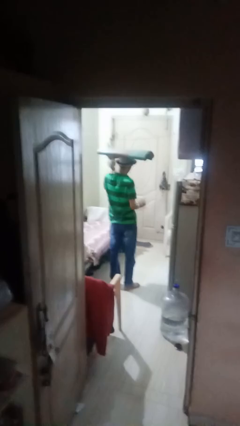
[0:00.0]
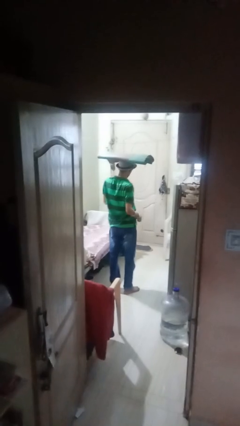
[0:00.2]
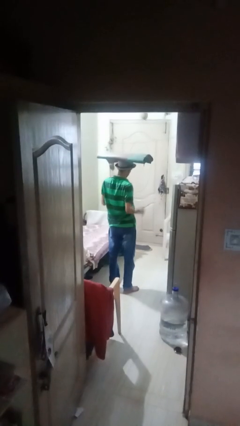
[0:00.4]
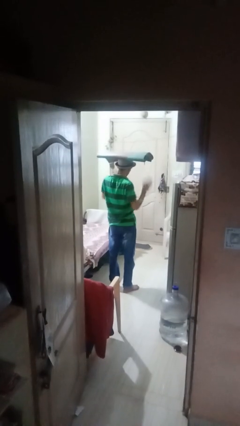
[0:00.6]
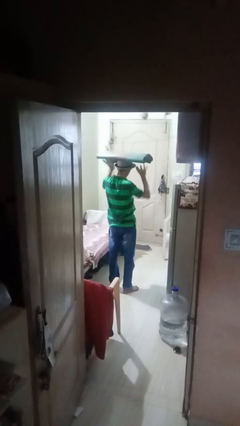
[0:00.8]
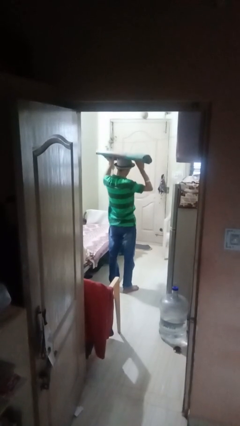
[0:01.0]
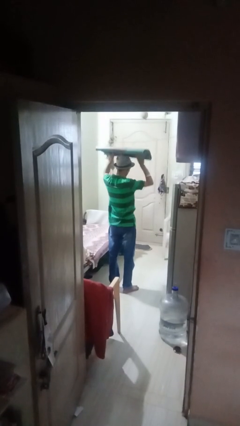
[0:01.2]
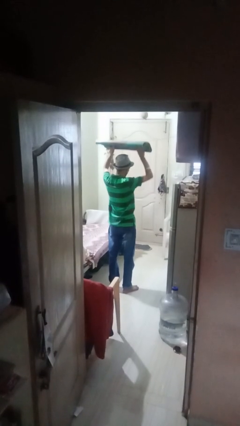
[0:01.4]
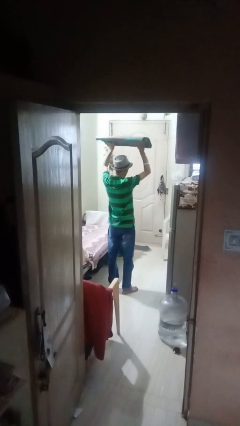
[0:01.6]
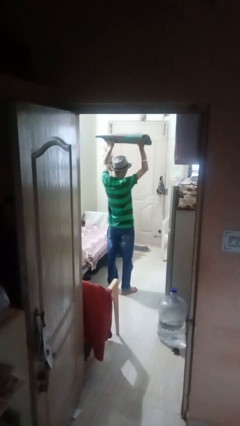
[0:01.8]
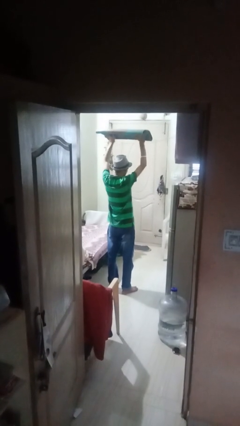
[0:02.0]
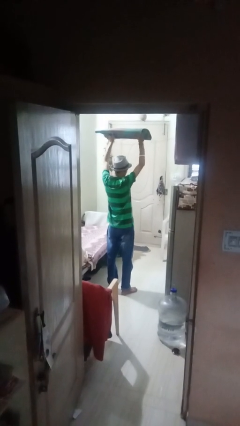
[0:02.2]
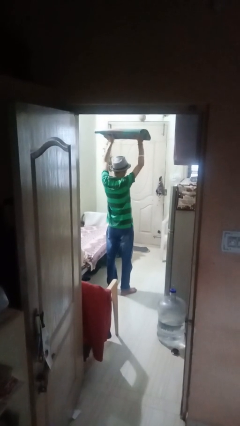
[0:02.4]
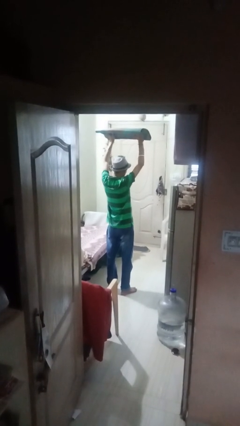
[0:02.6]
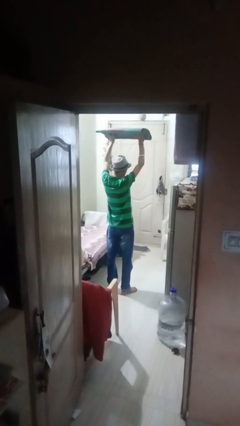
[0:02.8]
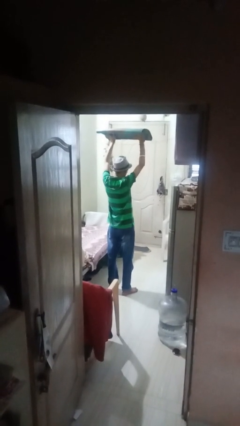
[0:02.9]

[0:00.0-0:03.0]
person holds object above head

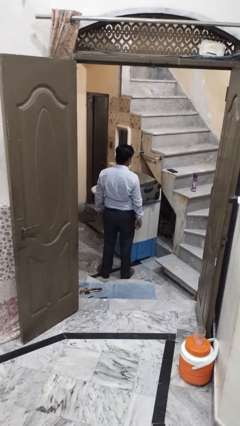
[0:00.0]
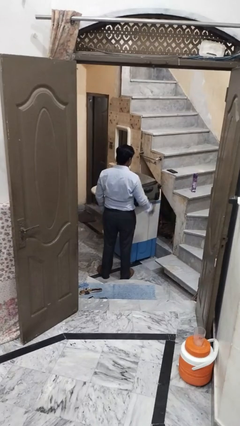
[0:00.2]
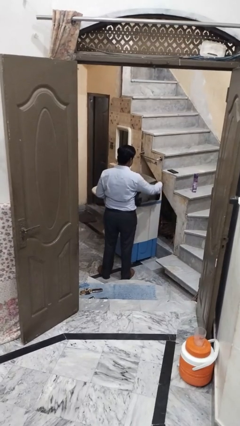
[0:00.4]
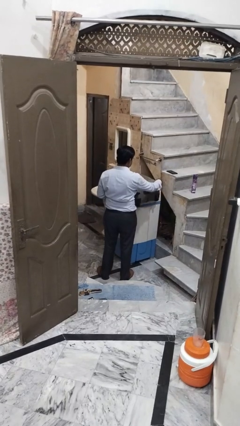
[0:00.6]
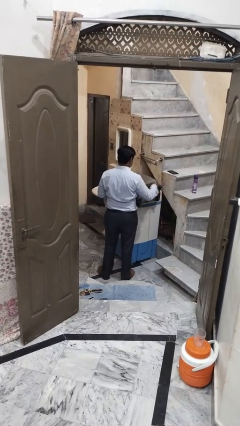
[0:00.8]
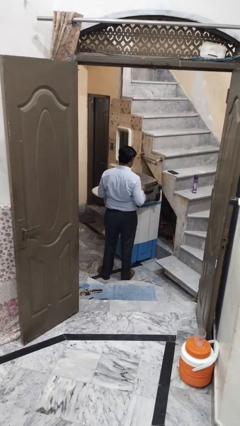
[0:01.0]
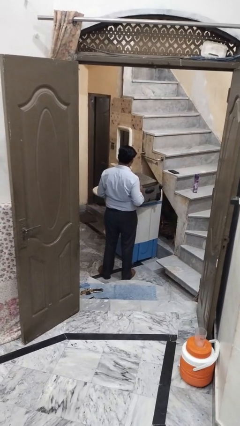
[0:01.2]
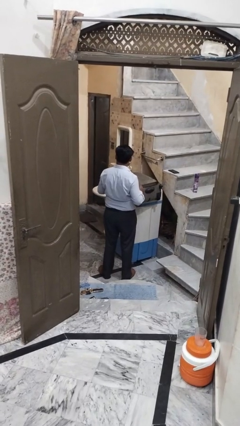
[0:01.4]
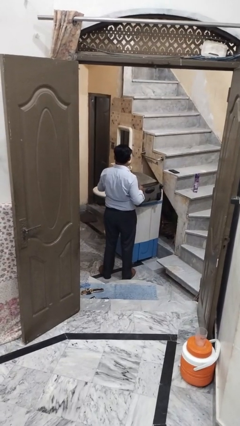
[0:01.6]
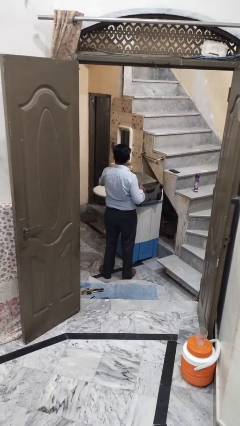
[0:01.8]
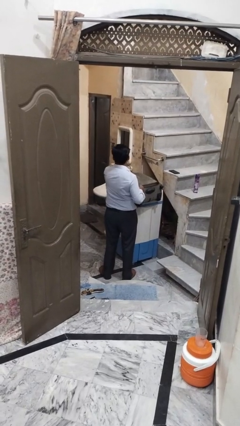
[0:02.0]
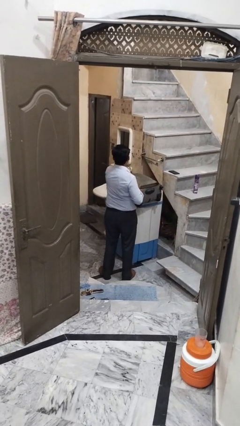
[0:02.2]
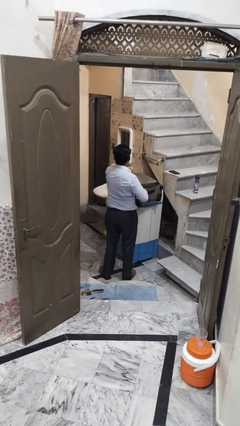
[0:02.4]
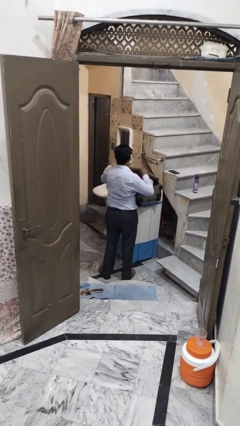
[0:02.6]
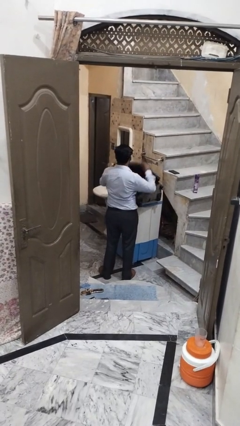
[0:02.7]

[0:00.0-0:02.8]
person opens suitcase

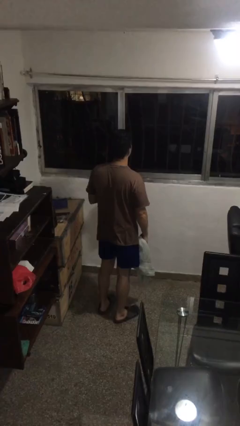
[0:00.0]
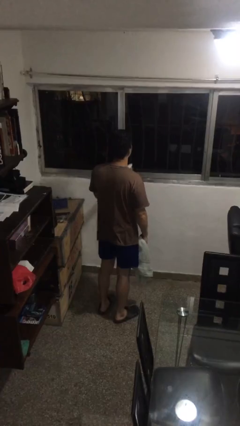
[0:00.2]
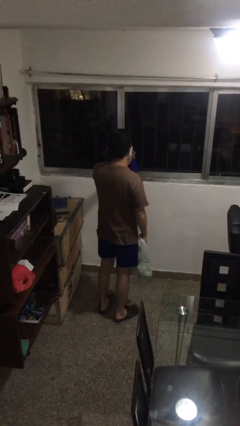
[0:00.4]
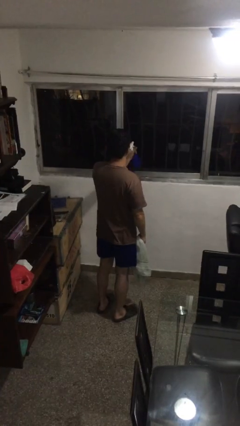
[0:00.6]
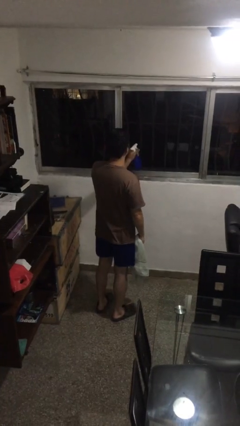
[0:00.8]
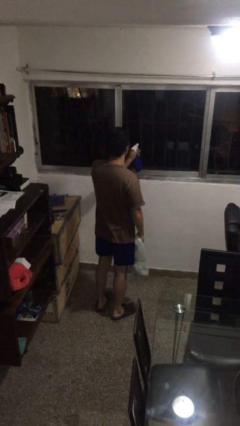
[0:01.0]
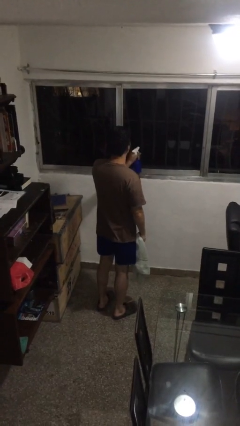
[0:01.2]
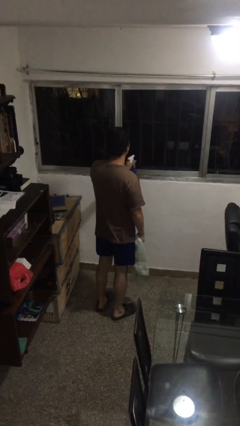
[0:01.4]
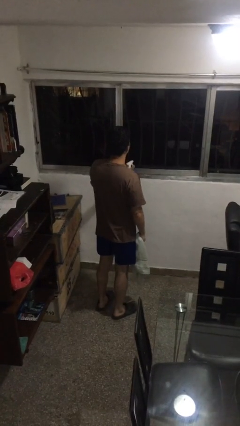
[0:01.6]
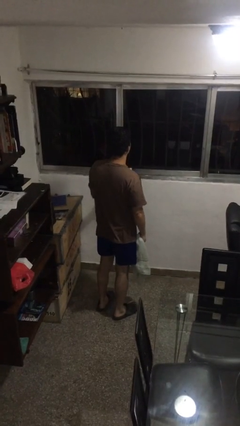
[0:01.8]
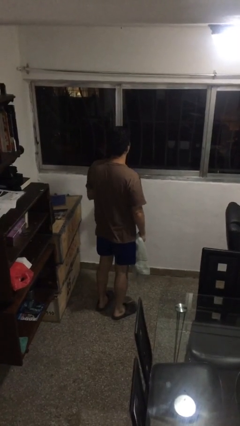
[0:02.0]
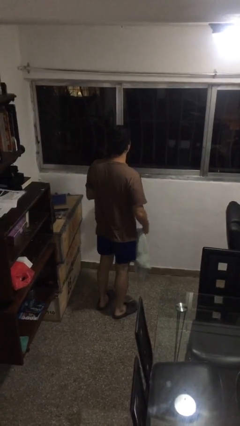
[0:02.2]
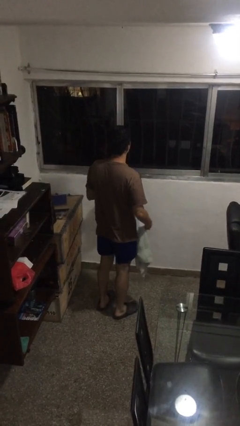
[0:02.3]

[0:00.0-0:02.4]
person sprays from bottle

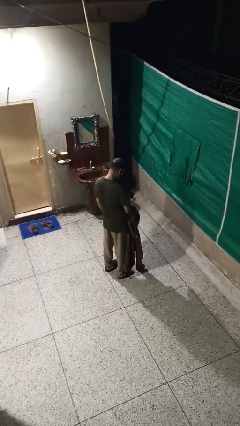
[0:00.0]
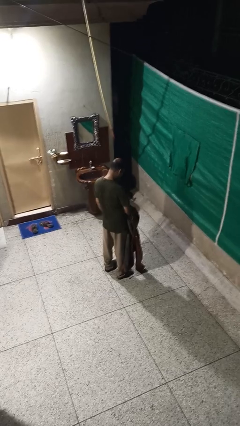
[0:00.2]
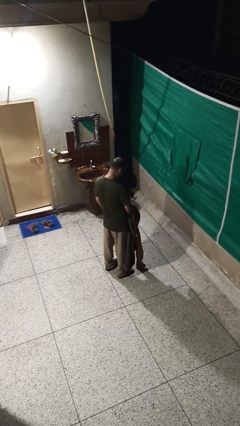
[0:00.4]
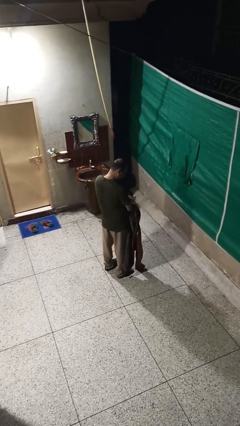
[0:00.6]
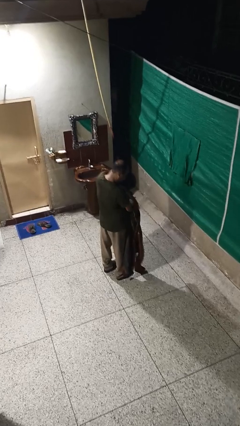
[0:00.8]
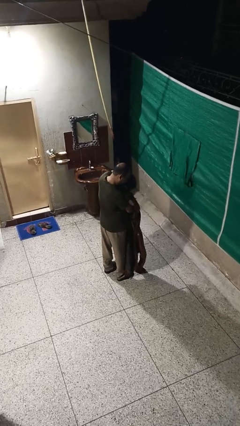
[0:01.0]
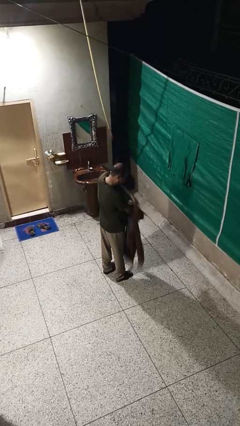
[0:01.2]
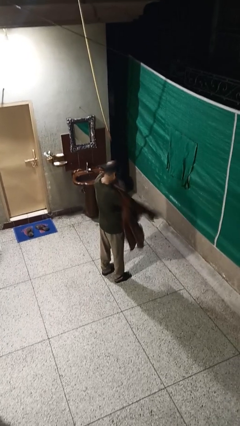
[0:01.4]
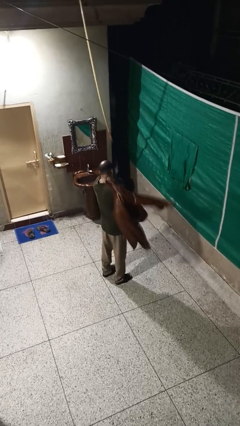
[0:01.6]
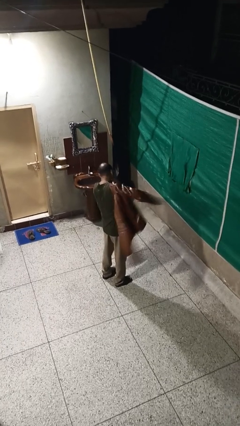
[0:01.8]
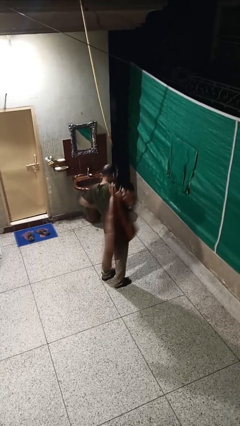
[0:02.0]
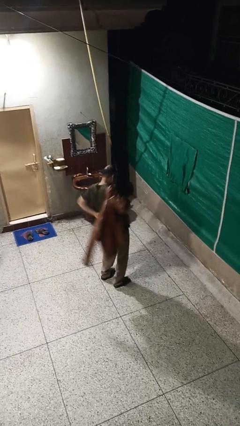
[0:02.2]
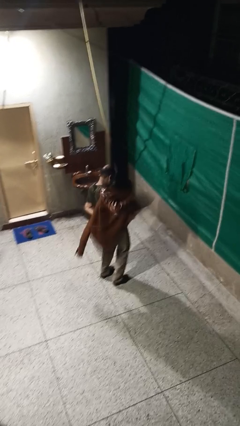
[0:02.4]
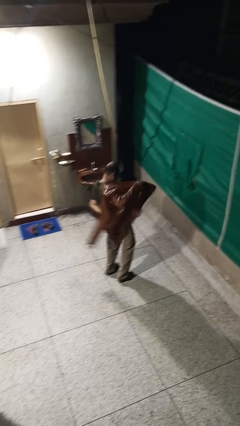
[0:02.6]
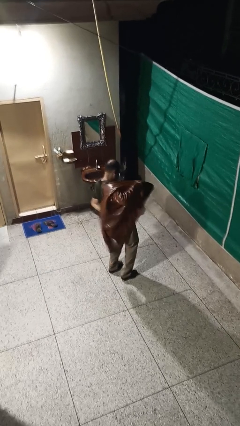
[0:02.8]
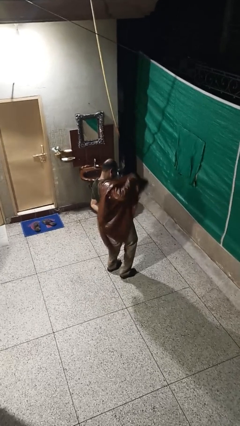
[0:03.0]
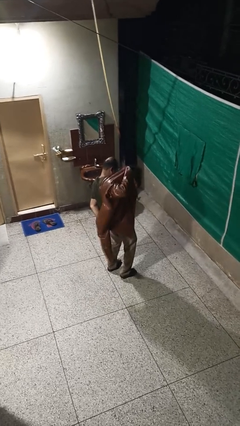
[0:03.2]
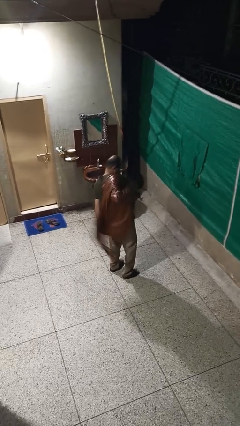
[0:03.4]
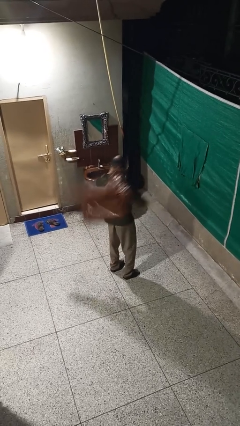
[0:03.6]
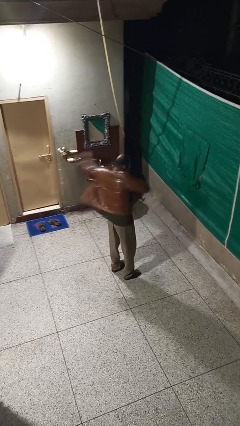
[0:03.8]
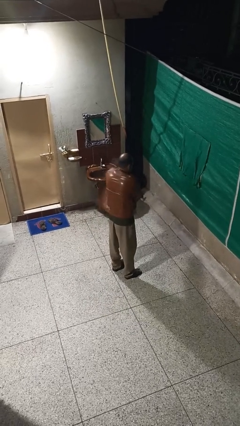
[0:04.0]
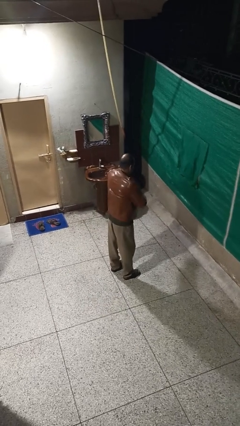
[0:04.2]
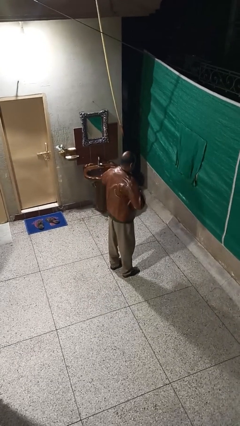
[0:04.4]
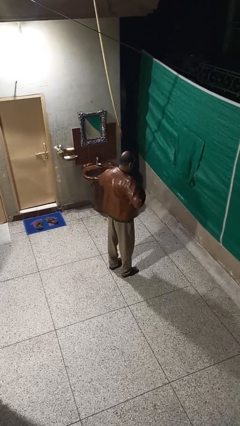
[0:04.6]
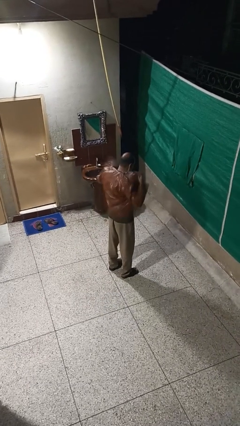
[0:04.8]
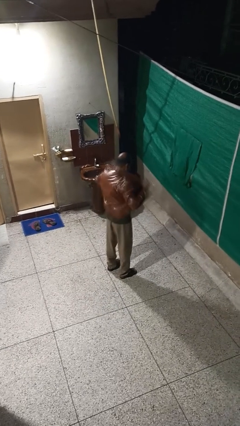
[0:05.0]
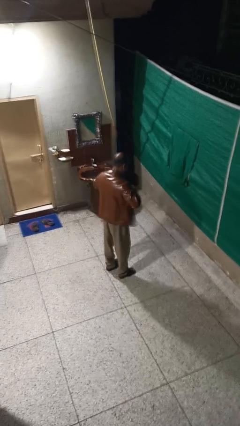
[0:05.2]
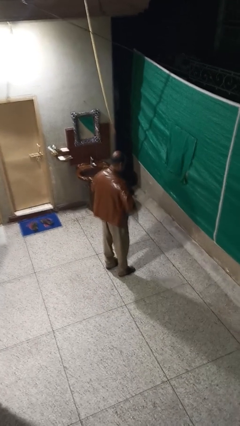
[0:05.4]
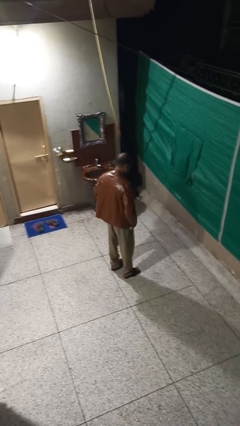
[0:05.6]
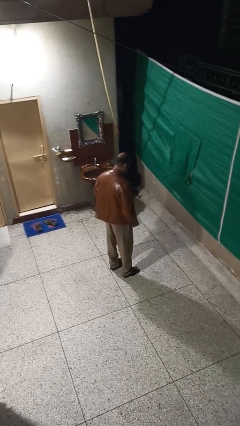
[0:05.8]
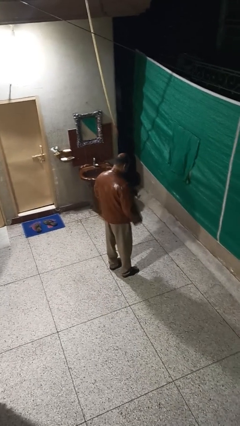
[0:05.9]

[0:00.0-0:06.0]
person puts on jacket

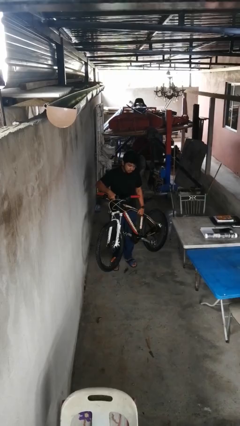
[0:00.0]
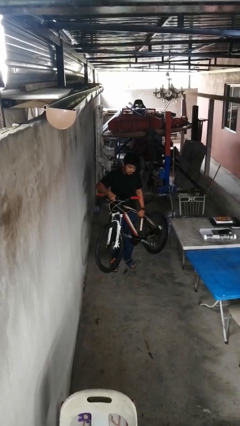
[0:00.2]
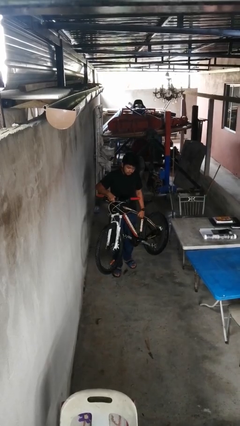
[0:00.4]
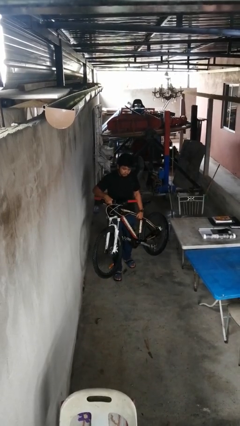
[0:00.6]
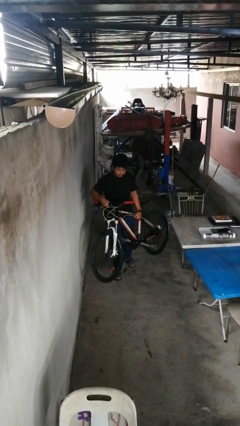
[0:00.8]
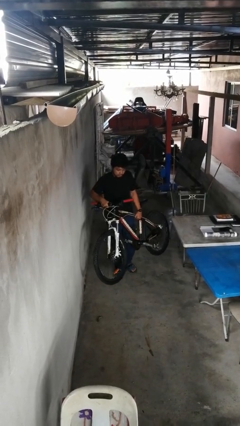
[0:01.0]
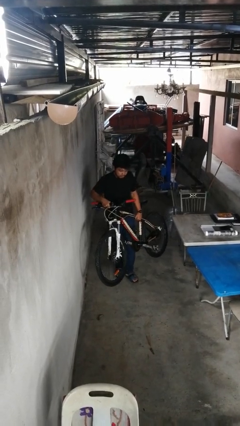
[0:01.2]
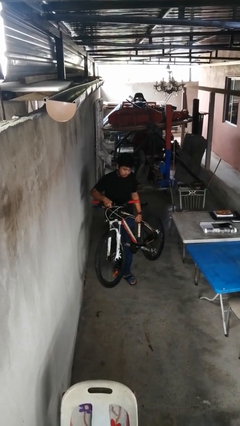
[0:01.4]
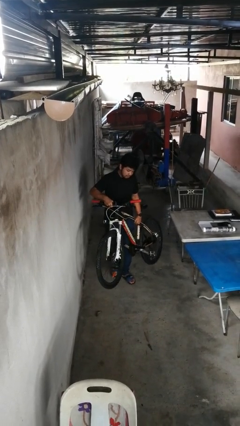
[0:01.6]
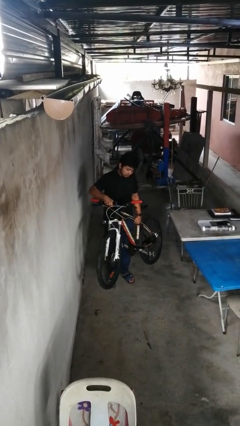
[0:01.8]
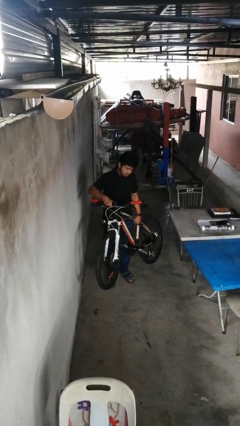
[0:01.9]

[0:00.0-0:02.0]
person carries bicycle

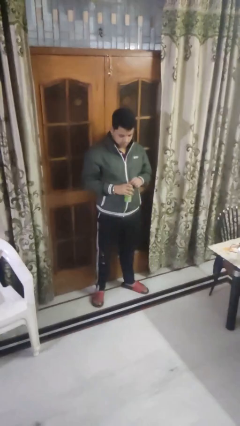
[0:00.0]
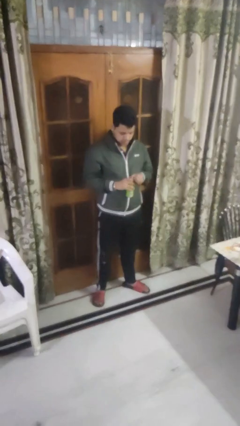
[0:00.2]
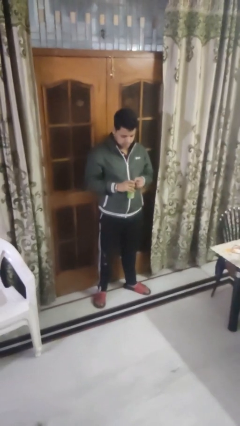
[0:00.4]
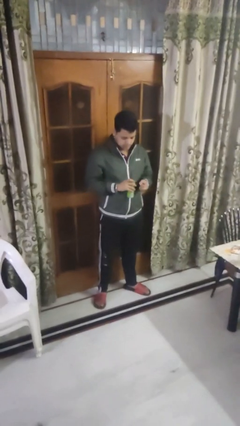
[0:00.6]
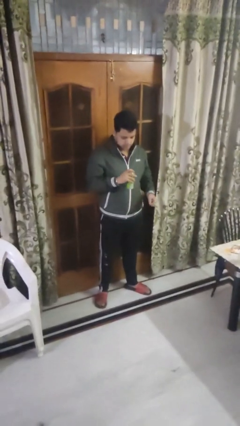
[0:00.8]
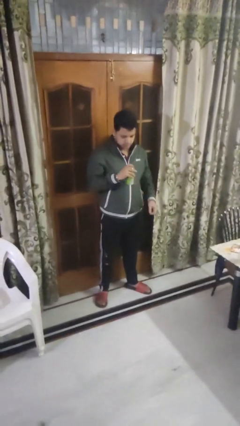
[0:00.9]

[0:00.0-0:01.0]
person opens beverage can

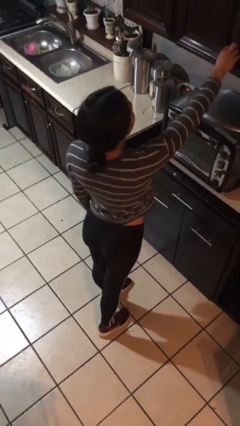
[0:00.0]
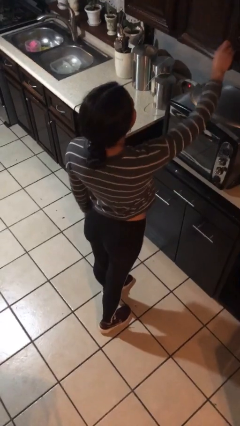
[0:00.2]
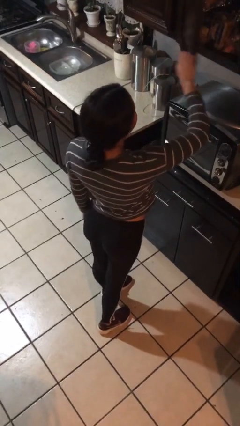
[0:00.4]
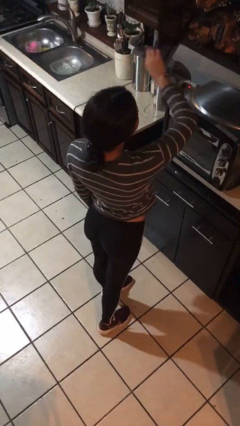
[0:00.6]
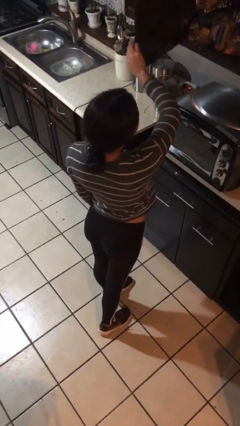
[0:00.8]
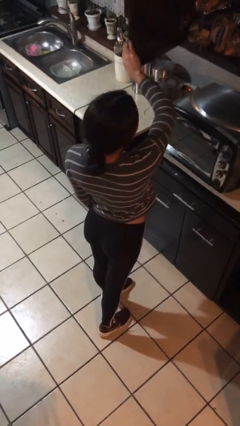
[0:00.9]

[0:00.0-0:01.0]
person opens cabinet
